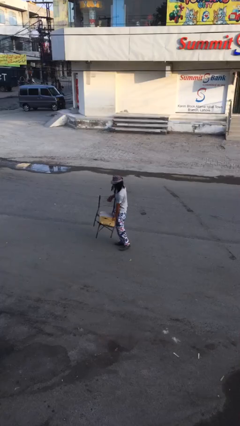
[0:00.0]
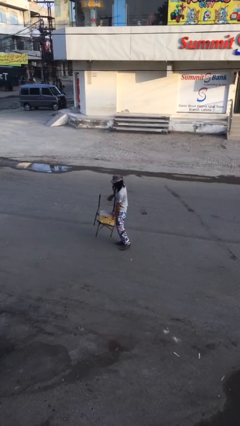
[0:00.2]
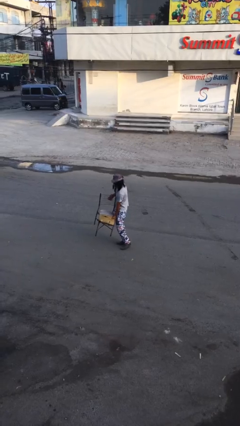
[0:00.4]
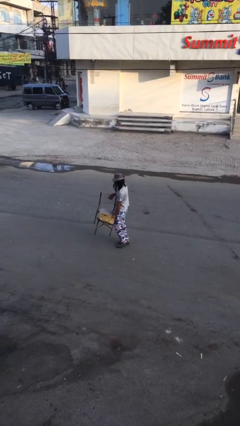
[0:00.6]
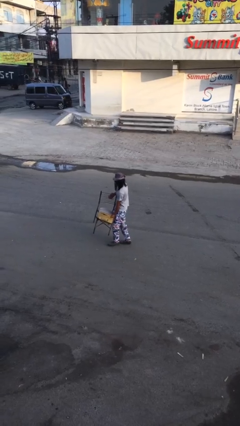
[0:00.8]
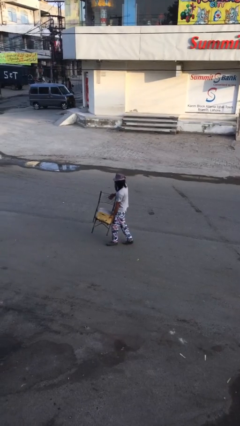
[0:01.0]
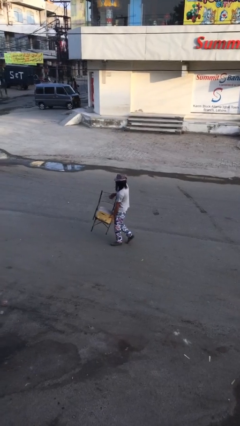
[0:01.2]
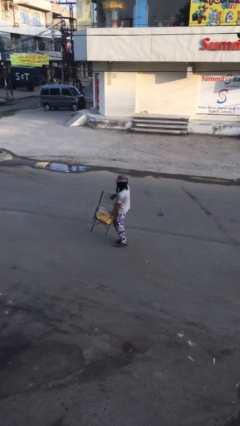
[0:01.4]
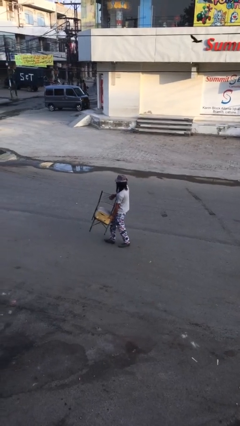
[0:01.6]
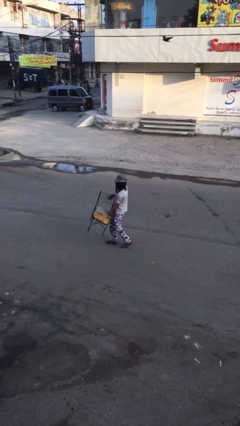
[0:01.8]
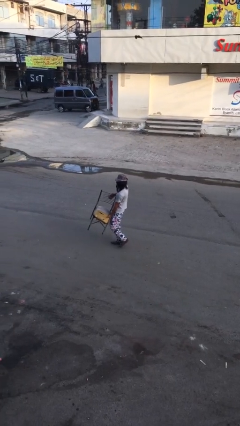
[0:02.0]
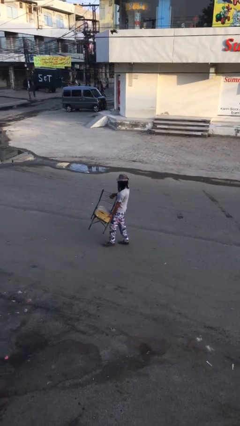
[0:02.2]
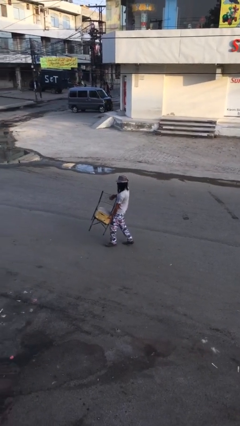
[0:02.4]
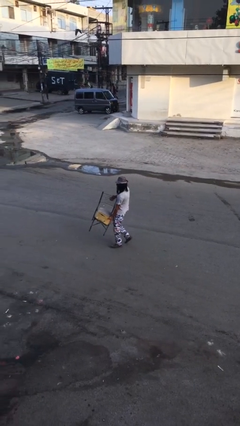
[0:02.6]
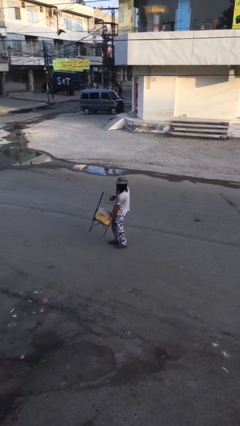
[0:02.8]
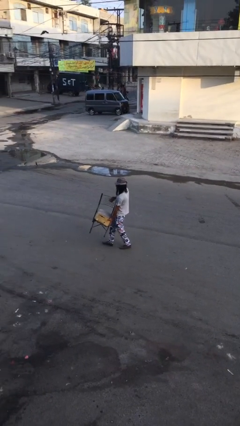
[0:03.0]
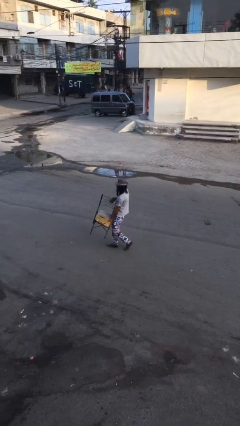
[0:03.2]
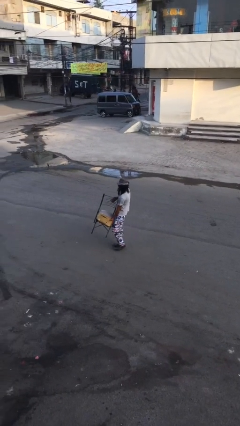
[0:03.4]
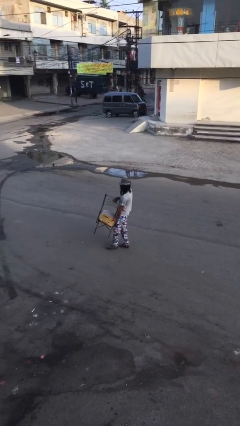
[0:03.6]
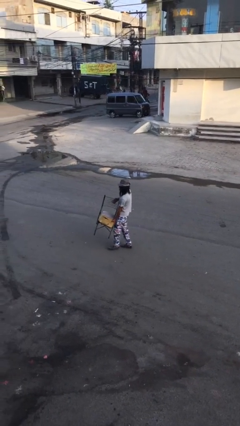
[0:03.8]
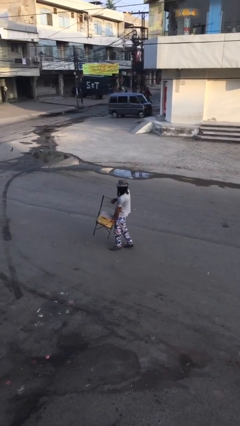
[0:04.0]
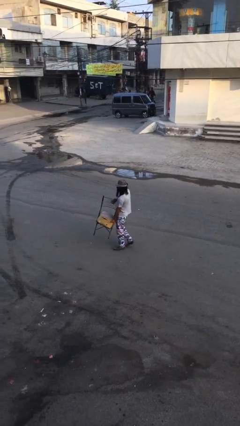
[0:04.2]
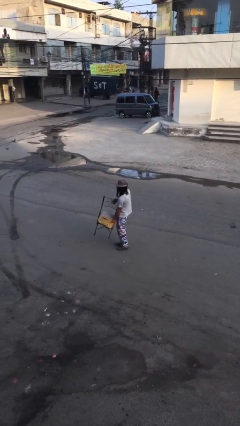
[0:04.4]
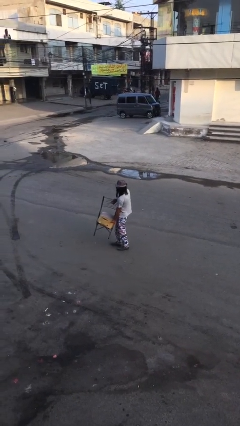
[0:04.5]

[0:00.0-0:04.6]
person carries heavy object

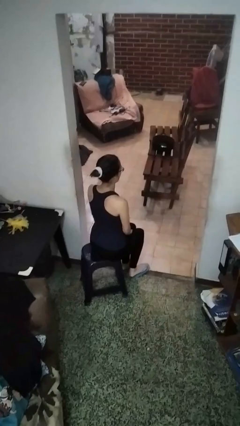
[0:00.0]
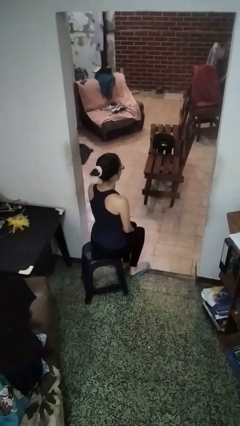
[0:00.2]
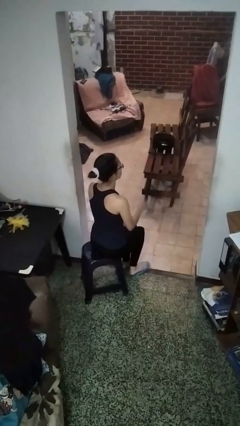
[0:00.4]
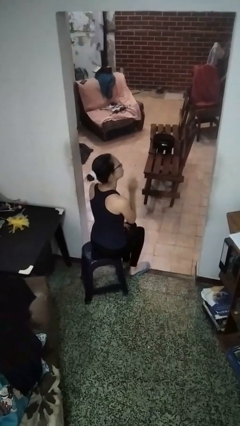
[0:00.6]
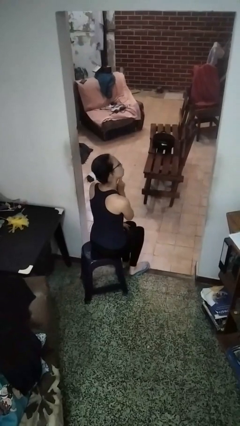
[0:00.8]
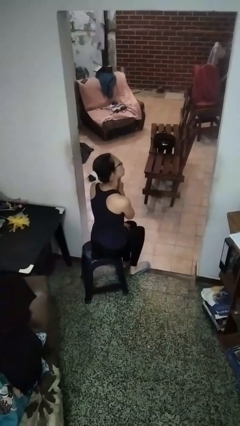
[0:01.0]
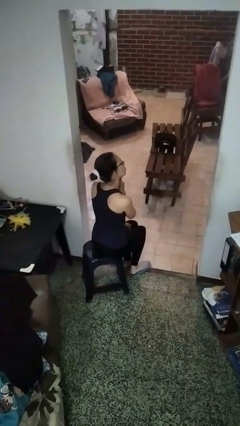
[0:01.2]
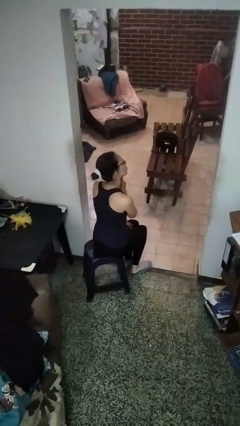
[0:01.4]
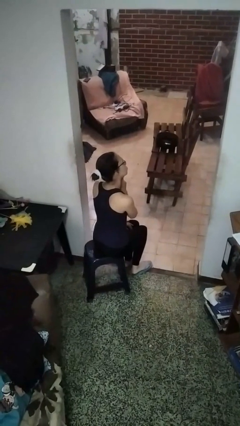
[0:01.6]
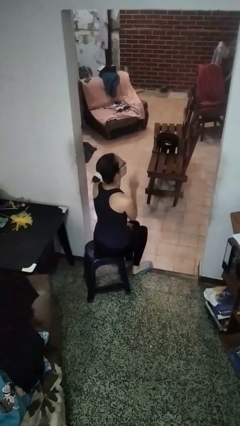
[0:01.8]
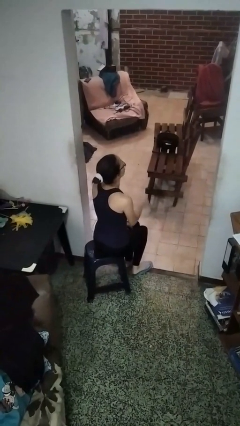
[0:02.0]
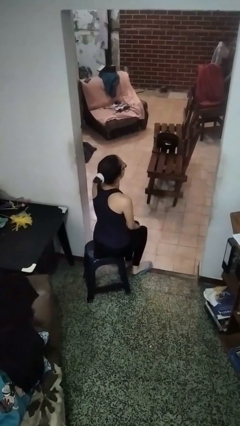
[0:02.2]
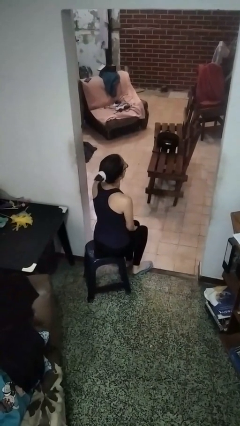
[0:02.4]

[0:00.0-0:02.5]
person strokes chin

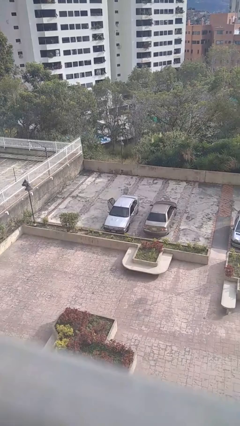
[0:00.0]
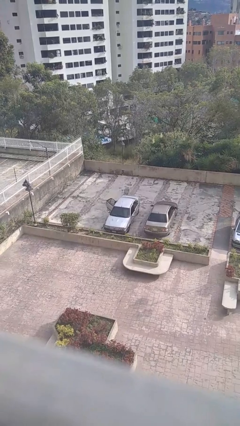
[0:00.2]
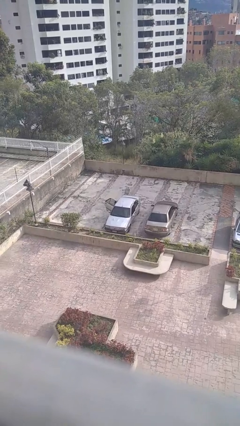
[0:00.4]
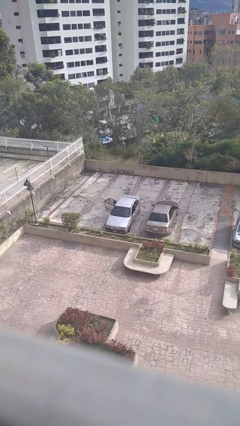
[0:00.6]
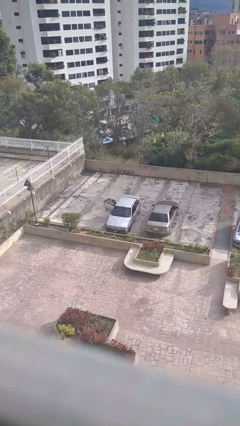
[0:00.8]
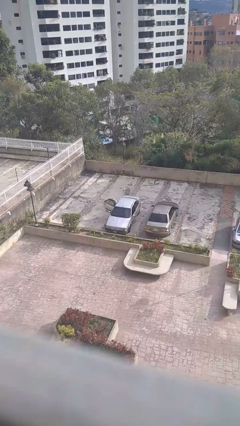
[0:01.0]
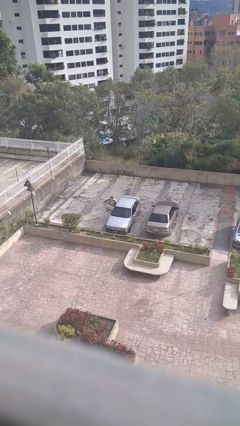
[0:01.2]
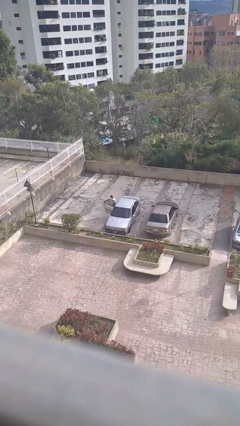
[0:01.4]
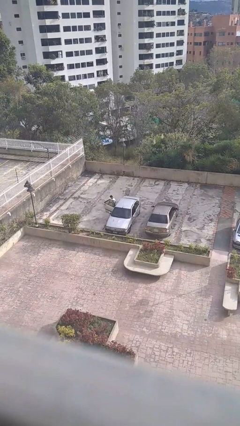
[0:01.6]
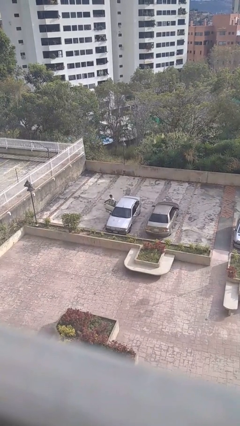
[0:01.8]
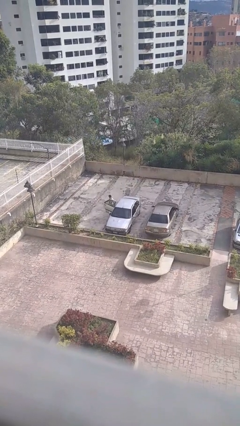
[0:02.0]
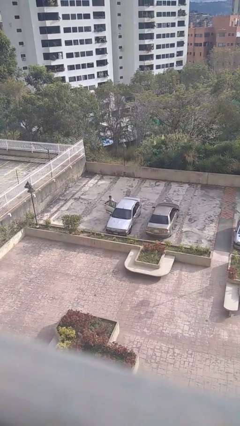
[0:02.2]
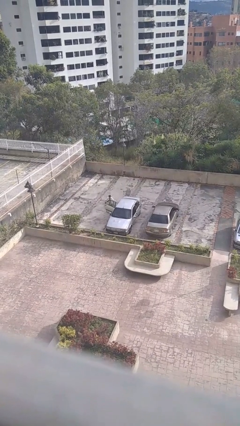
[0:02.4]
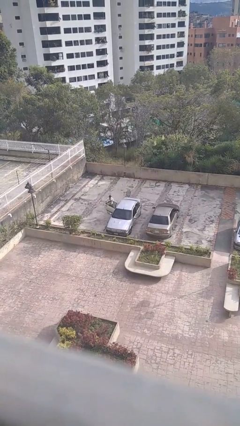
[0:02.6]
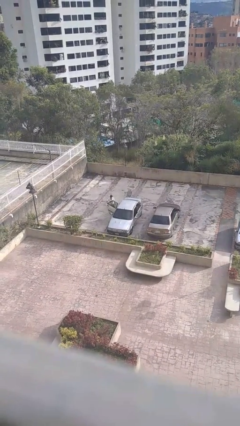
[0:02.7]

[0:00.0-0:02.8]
car drops off person

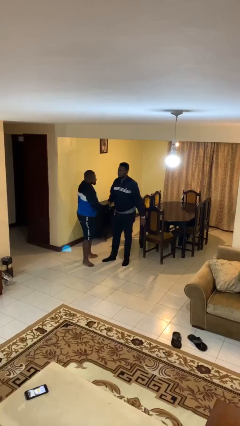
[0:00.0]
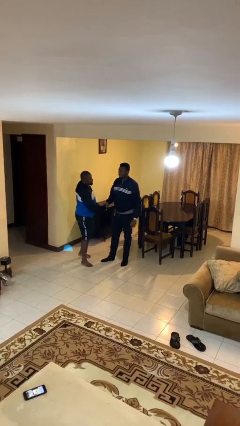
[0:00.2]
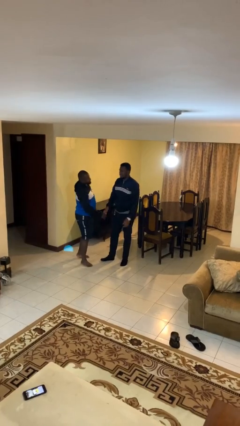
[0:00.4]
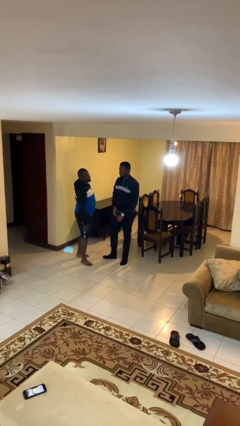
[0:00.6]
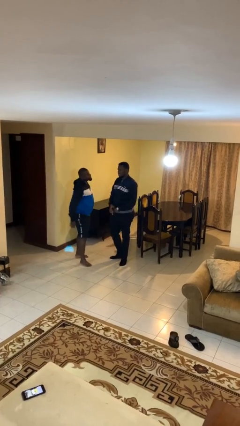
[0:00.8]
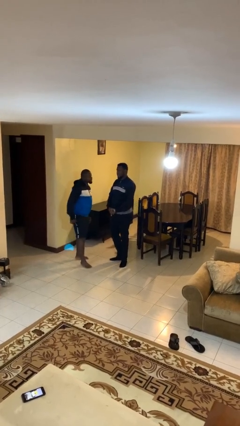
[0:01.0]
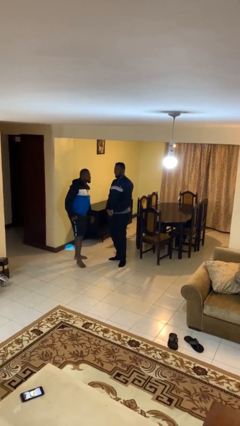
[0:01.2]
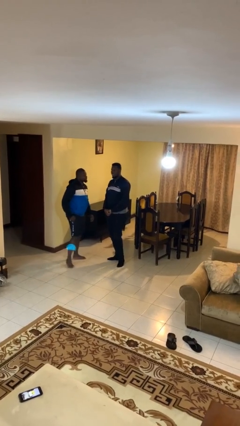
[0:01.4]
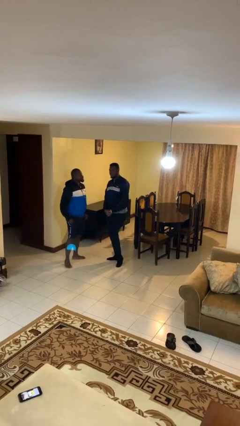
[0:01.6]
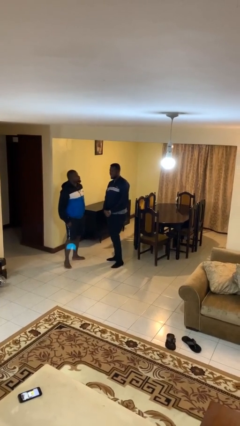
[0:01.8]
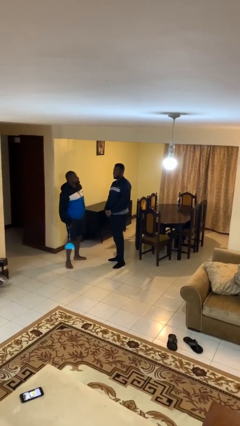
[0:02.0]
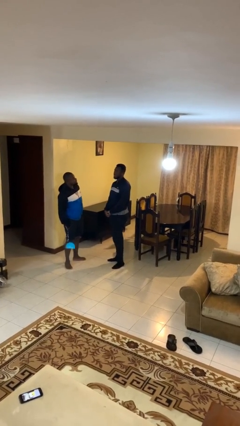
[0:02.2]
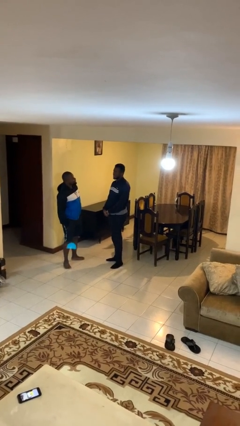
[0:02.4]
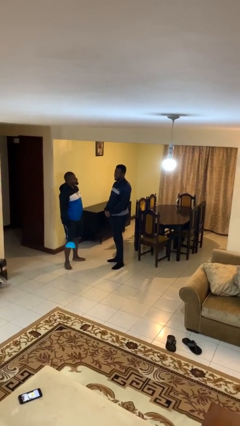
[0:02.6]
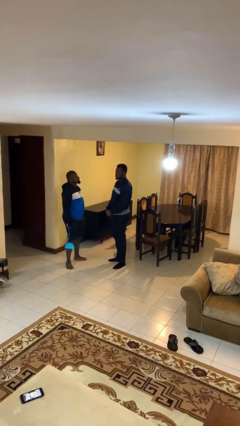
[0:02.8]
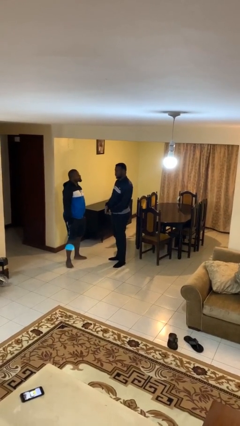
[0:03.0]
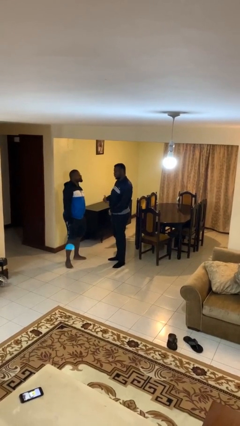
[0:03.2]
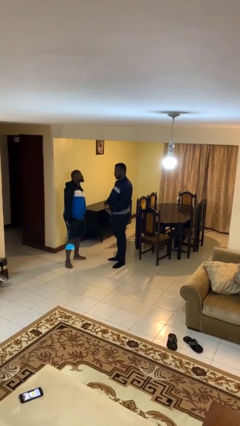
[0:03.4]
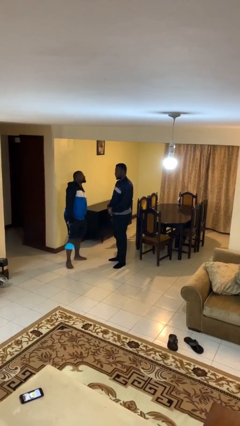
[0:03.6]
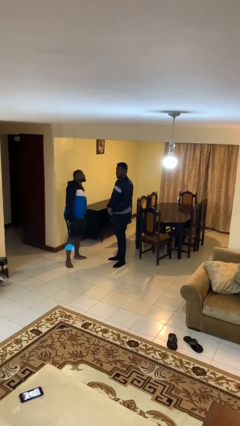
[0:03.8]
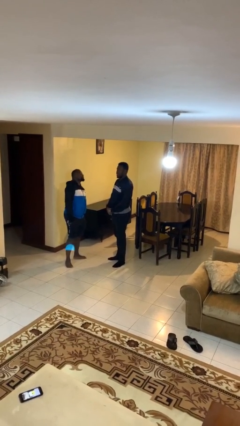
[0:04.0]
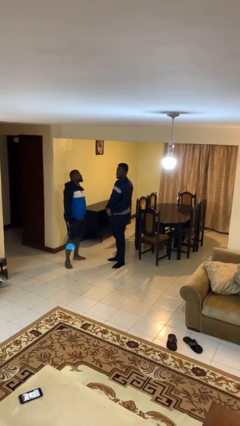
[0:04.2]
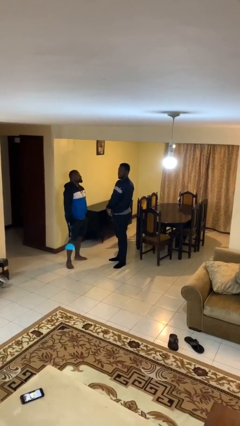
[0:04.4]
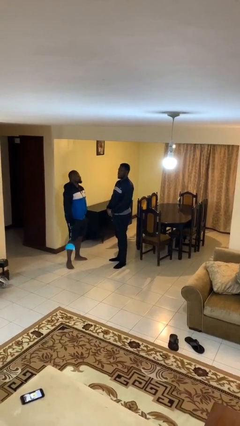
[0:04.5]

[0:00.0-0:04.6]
person talks to person

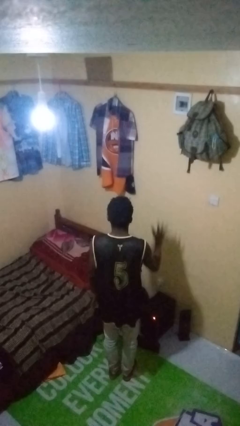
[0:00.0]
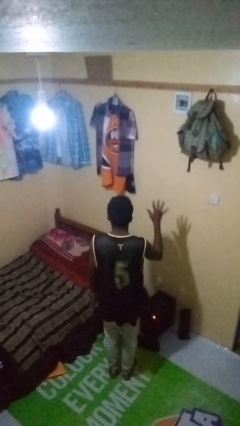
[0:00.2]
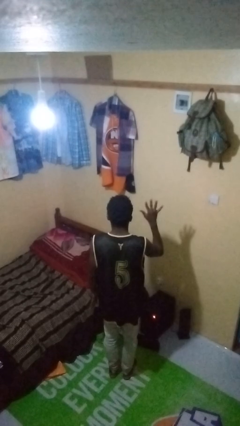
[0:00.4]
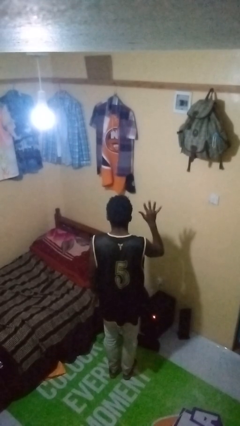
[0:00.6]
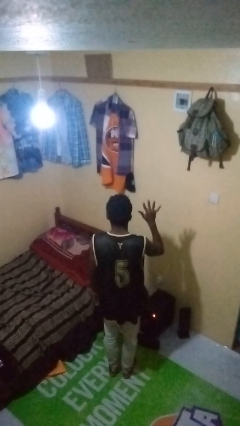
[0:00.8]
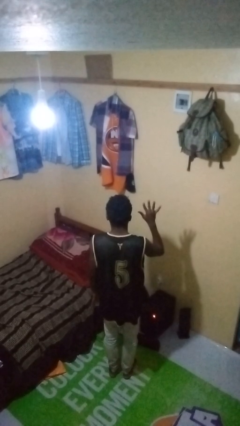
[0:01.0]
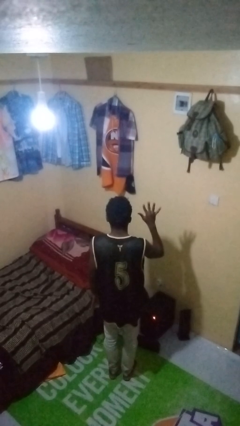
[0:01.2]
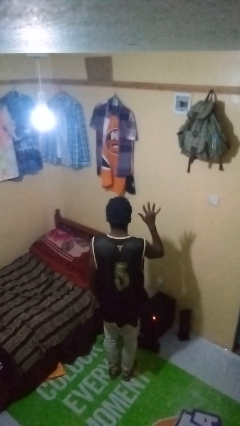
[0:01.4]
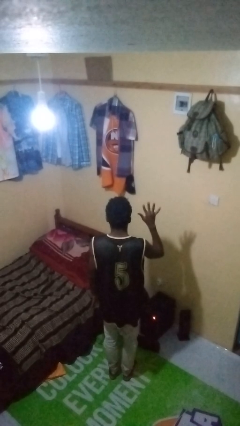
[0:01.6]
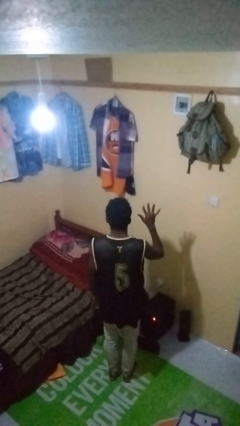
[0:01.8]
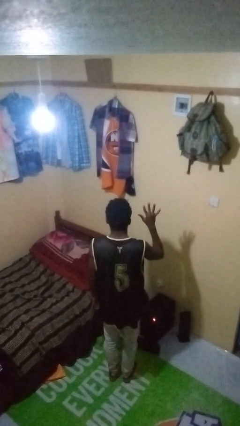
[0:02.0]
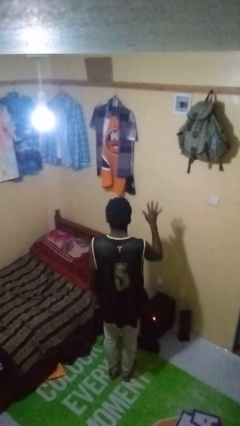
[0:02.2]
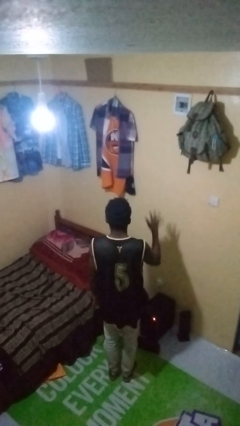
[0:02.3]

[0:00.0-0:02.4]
person gestures number five

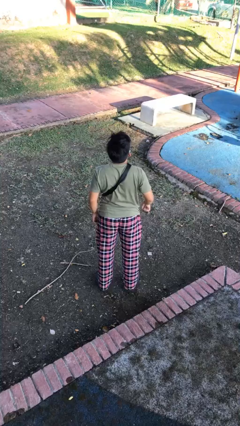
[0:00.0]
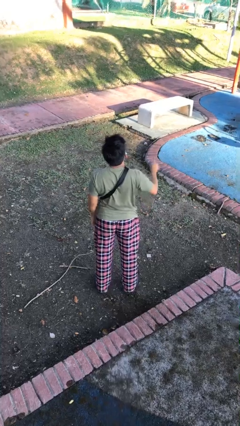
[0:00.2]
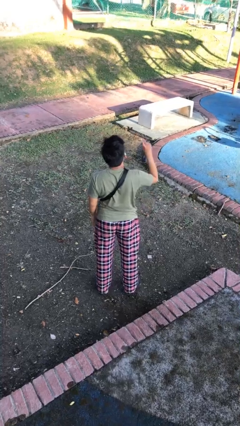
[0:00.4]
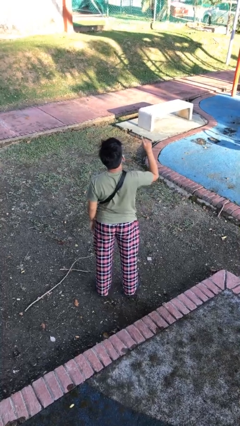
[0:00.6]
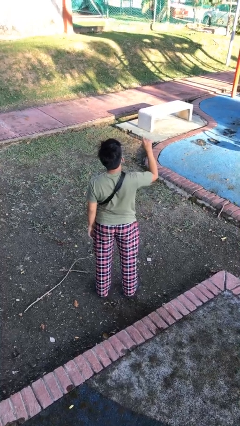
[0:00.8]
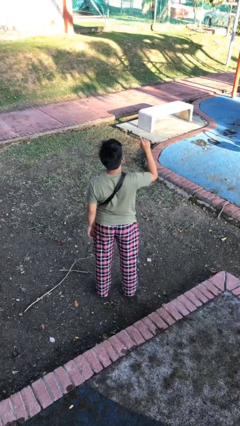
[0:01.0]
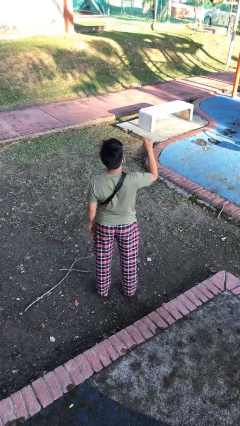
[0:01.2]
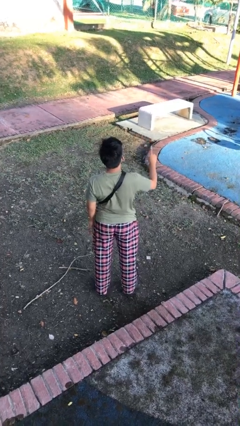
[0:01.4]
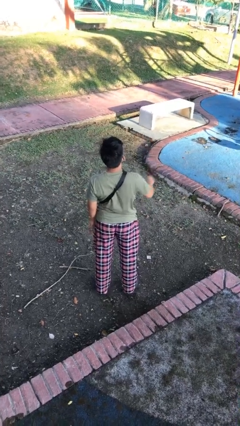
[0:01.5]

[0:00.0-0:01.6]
person gestures number one
